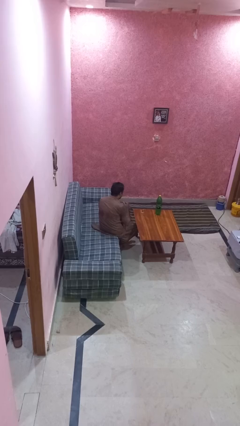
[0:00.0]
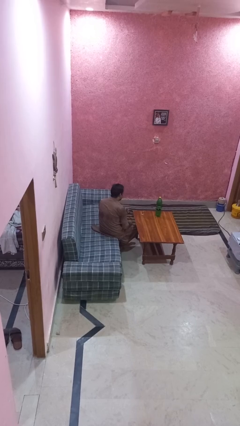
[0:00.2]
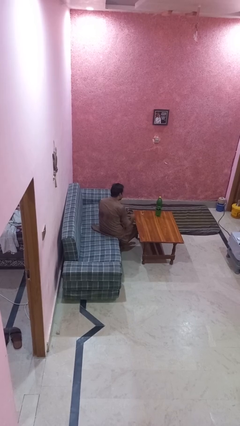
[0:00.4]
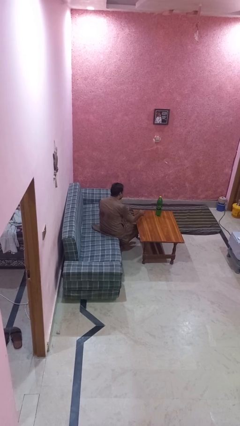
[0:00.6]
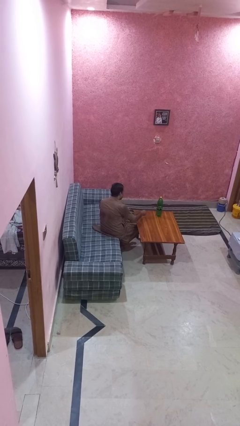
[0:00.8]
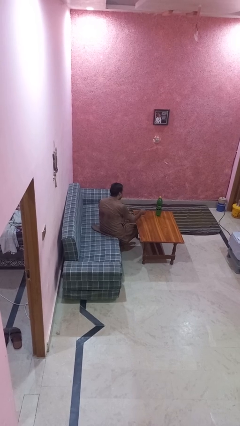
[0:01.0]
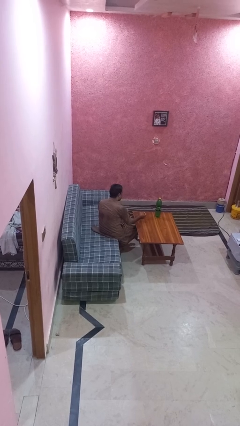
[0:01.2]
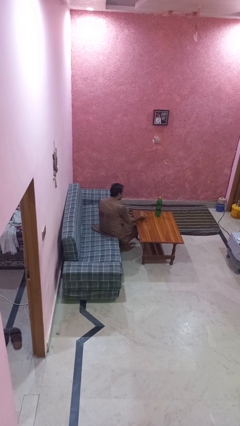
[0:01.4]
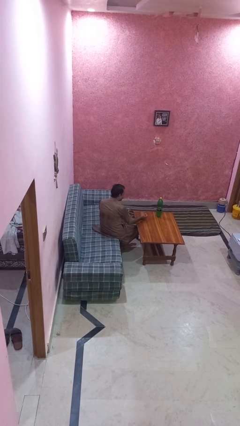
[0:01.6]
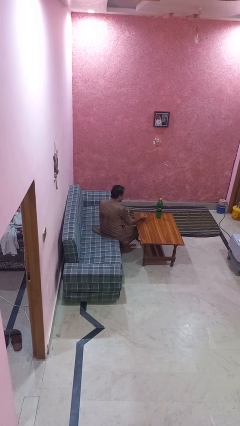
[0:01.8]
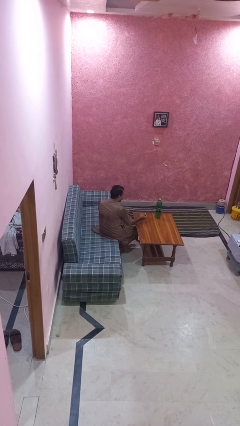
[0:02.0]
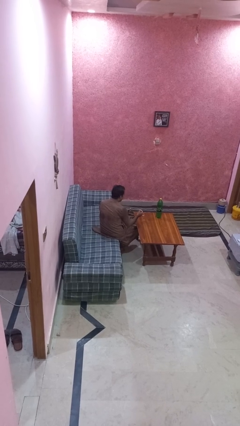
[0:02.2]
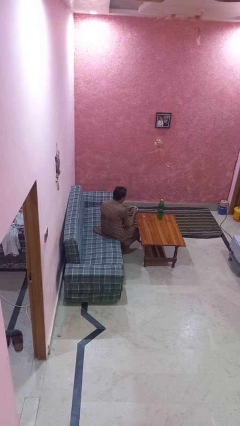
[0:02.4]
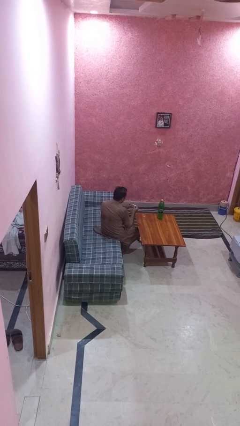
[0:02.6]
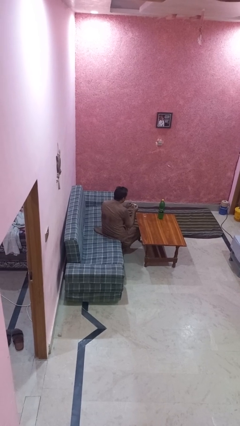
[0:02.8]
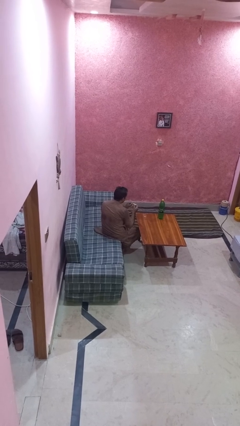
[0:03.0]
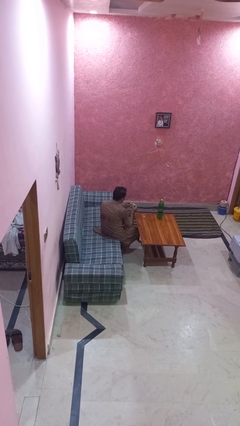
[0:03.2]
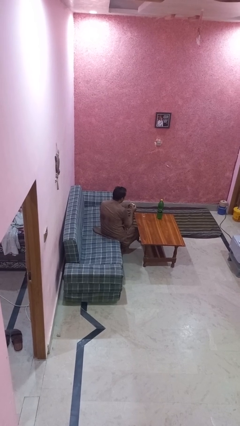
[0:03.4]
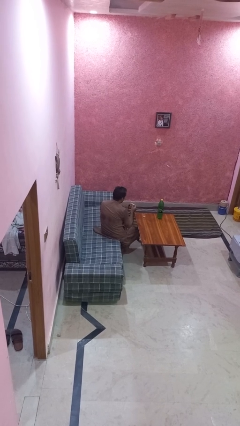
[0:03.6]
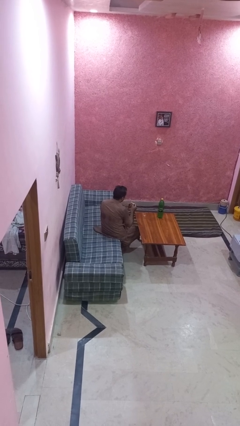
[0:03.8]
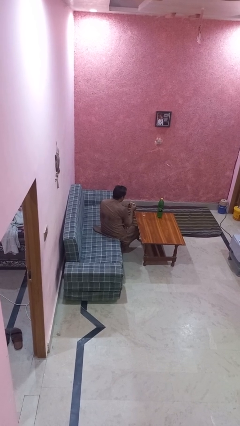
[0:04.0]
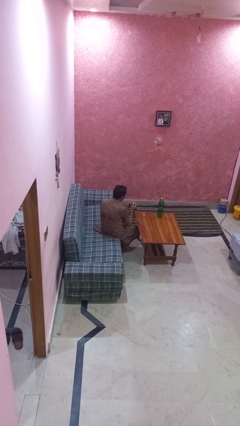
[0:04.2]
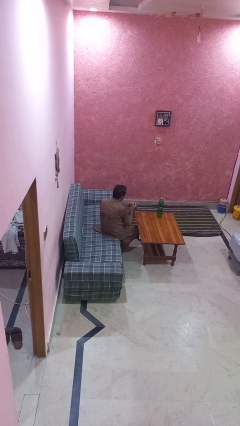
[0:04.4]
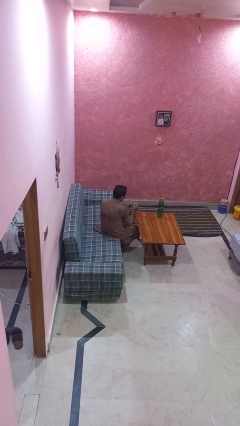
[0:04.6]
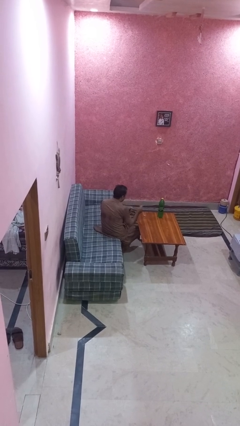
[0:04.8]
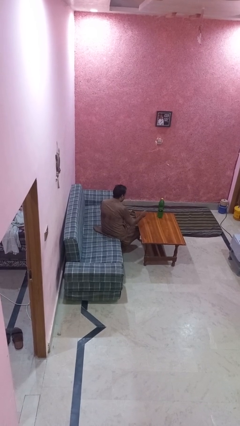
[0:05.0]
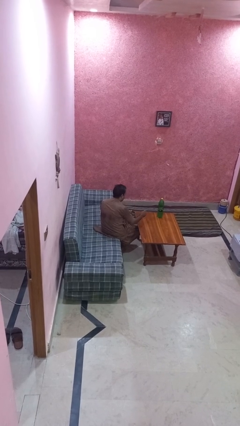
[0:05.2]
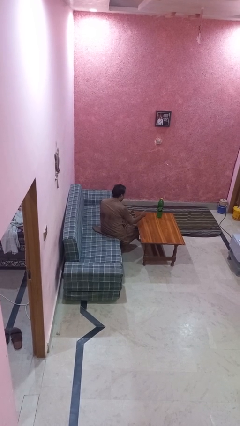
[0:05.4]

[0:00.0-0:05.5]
person paints fingernails

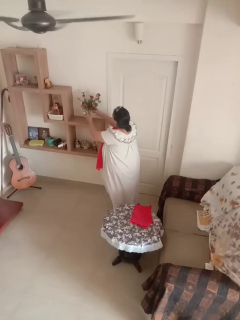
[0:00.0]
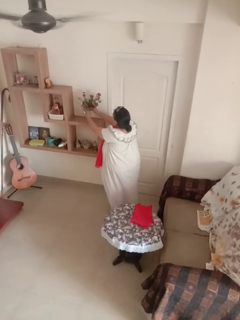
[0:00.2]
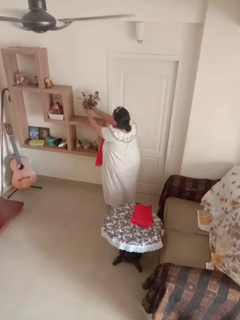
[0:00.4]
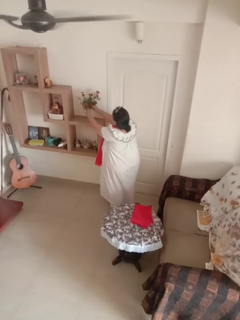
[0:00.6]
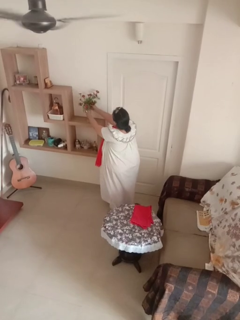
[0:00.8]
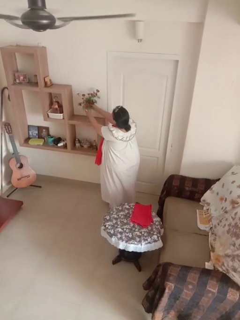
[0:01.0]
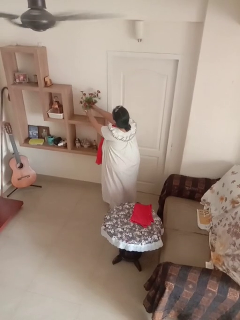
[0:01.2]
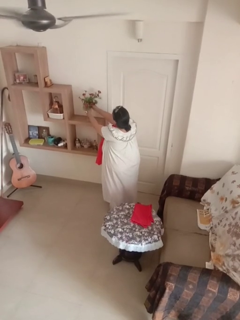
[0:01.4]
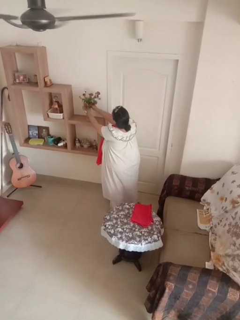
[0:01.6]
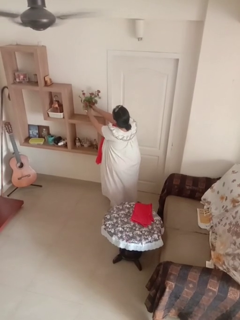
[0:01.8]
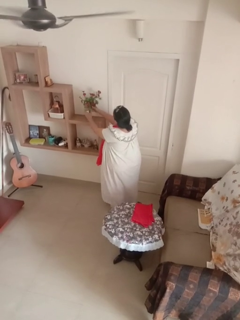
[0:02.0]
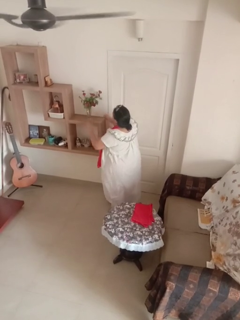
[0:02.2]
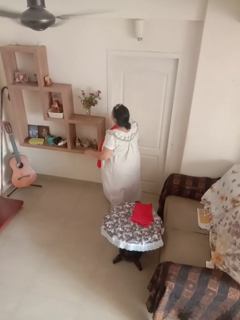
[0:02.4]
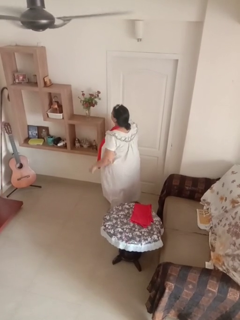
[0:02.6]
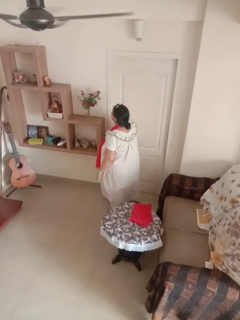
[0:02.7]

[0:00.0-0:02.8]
person arranges flowers in vase

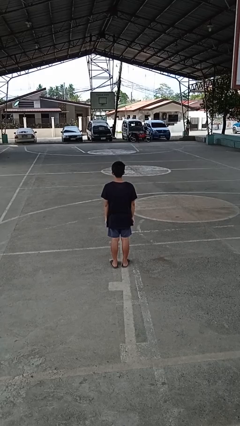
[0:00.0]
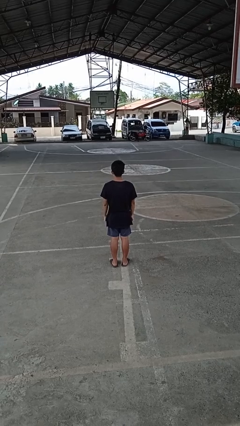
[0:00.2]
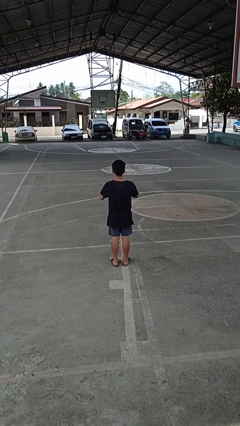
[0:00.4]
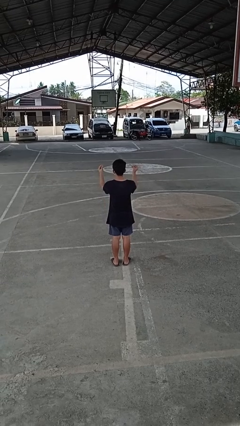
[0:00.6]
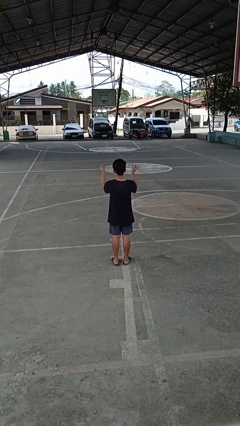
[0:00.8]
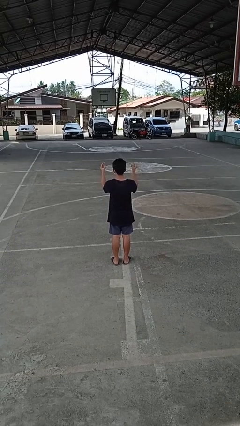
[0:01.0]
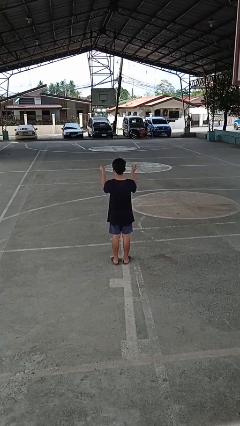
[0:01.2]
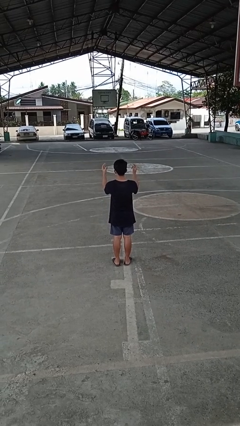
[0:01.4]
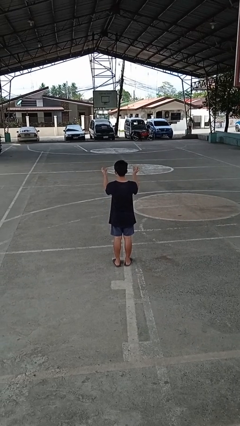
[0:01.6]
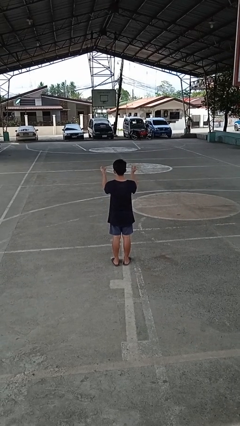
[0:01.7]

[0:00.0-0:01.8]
person snaps fingers

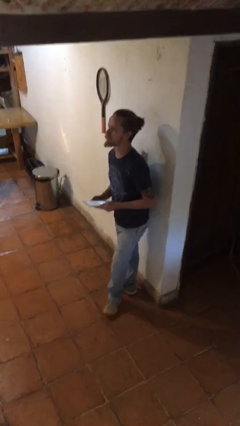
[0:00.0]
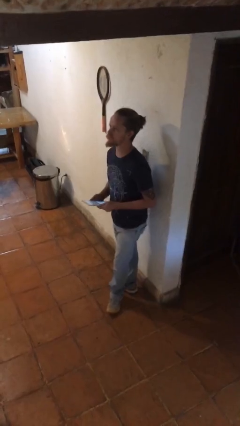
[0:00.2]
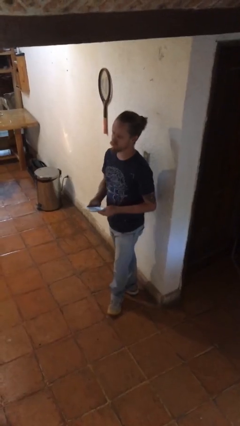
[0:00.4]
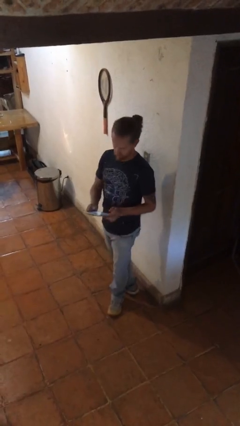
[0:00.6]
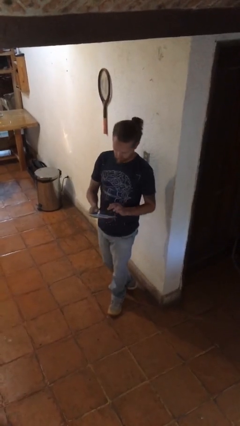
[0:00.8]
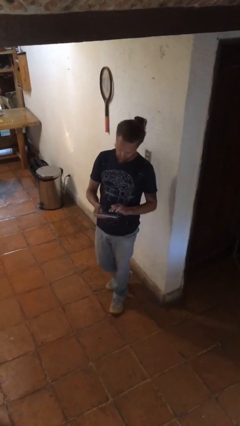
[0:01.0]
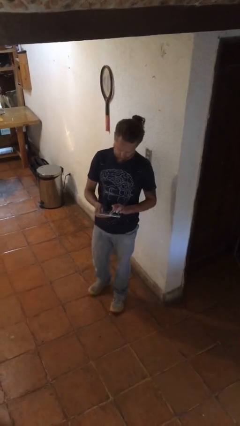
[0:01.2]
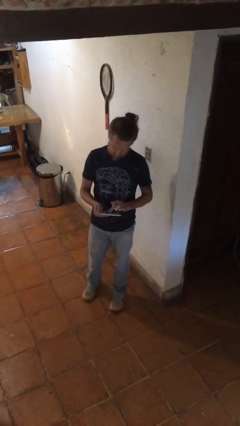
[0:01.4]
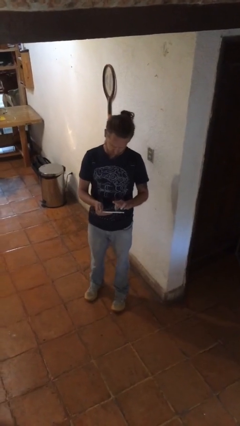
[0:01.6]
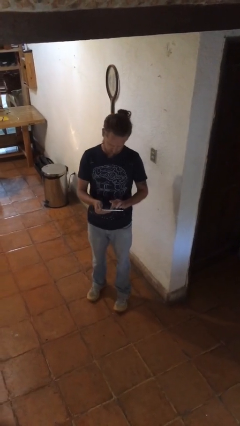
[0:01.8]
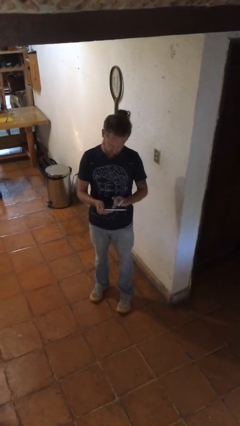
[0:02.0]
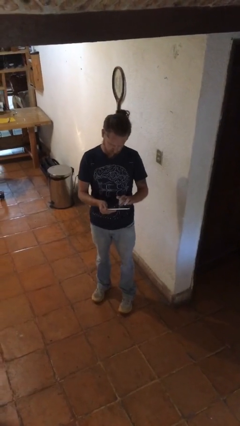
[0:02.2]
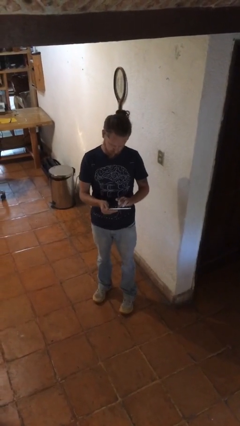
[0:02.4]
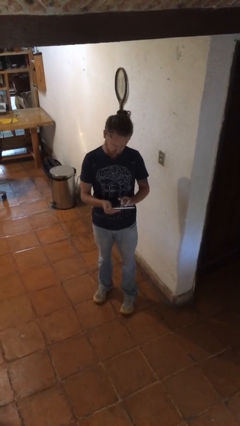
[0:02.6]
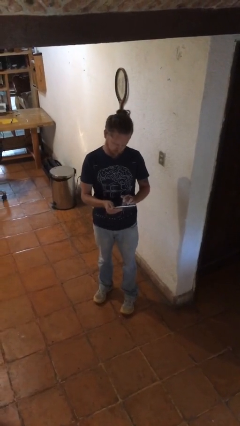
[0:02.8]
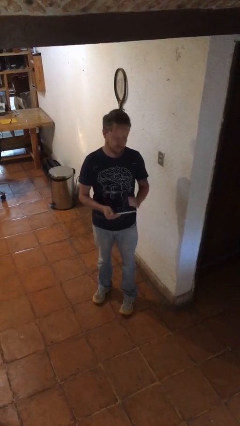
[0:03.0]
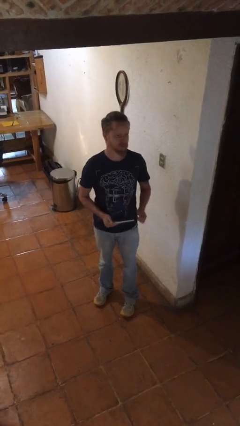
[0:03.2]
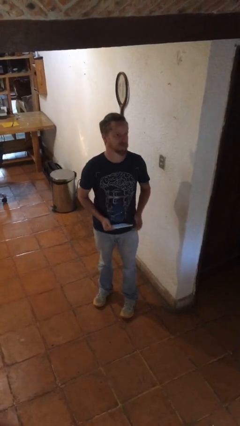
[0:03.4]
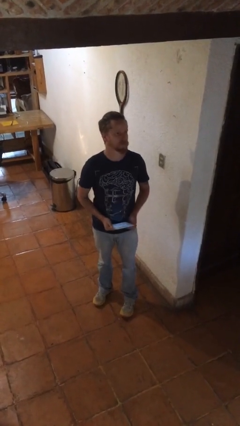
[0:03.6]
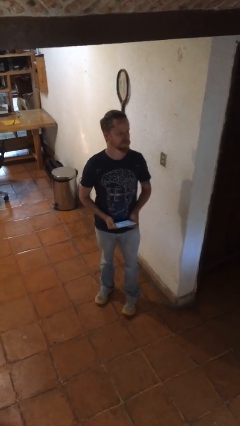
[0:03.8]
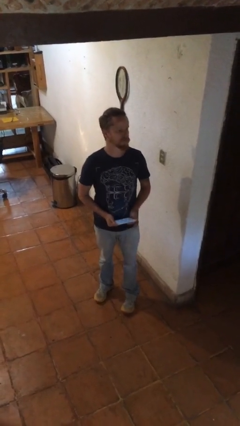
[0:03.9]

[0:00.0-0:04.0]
person interacts with tablet

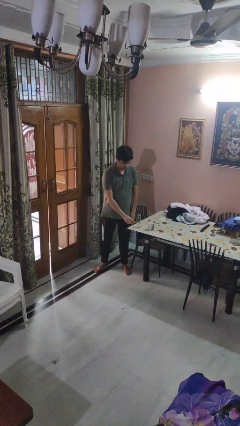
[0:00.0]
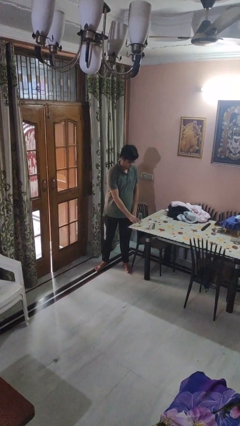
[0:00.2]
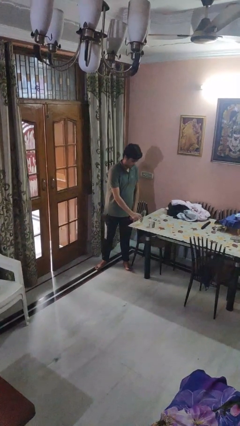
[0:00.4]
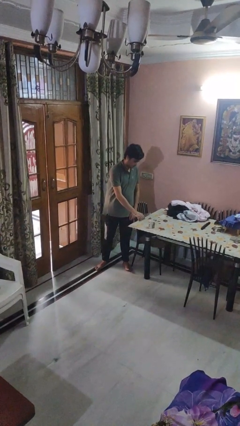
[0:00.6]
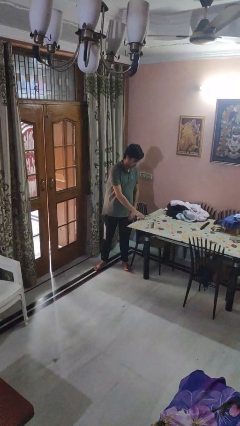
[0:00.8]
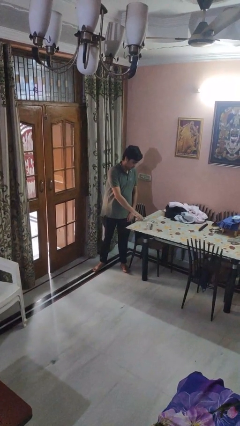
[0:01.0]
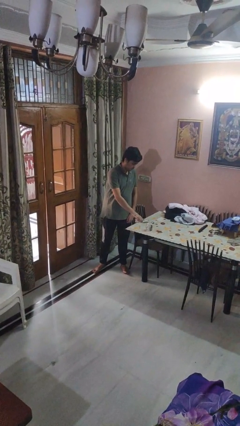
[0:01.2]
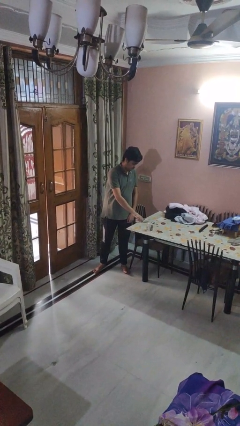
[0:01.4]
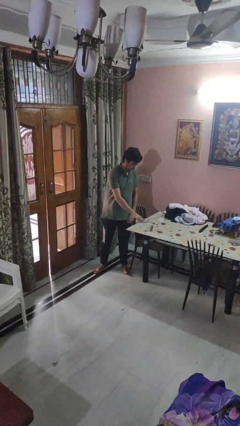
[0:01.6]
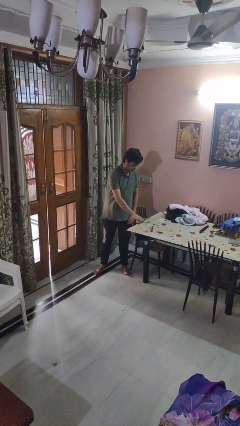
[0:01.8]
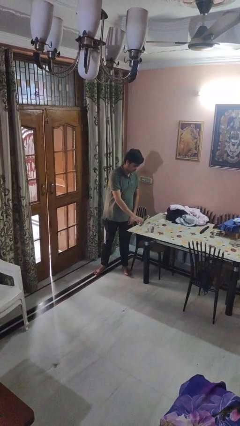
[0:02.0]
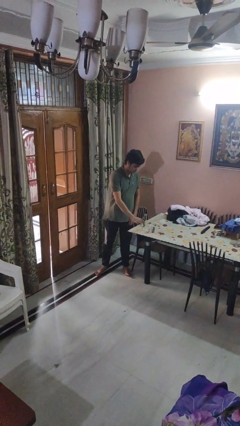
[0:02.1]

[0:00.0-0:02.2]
person pours liquid into cup

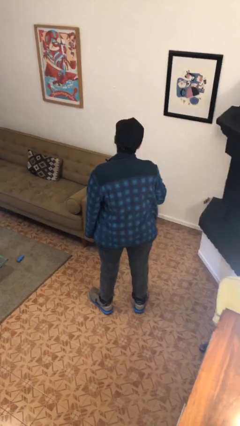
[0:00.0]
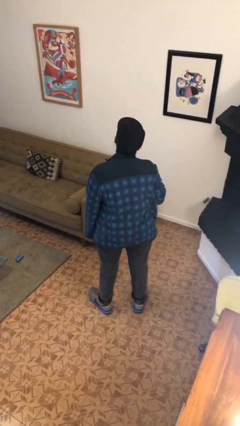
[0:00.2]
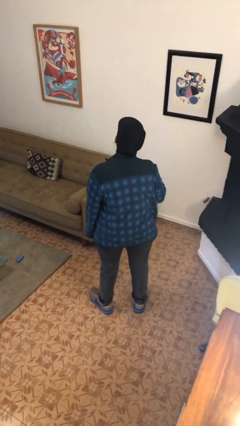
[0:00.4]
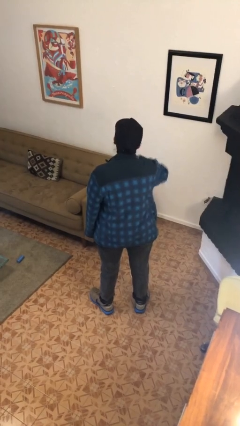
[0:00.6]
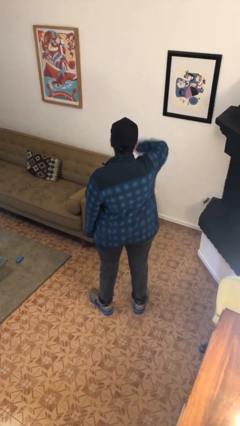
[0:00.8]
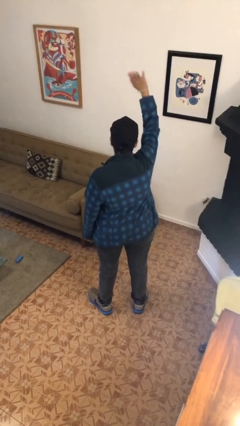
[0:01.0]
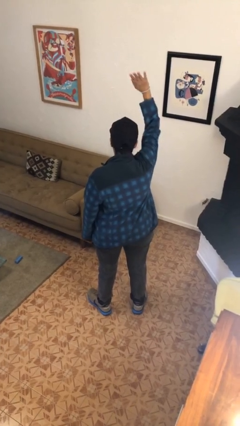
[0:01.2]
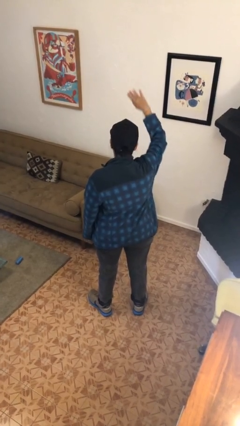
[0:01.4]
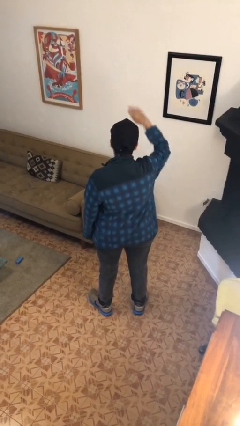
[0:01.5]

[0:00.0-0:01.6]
person gestures swipe up
